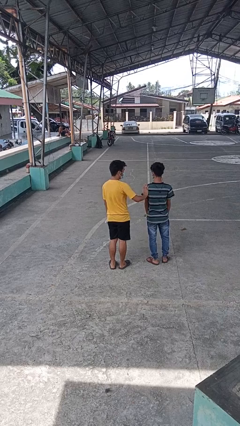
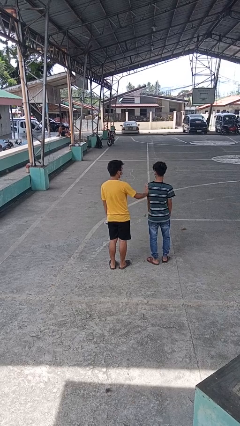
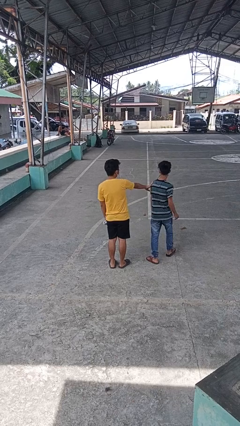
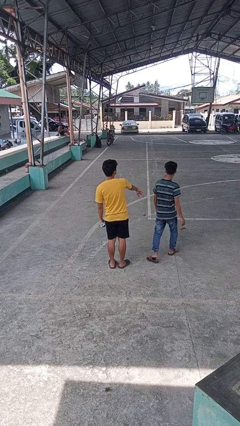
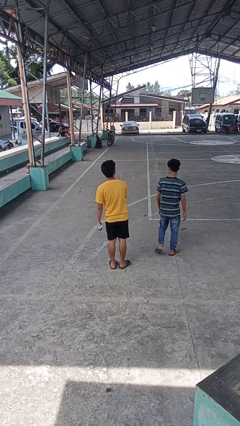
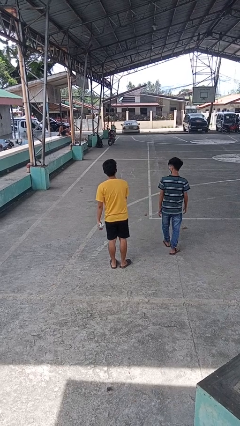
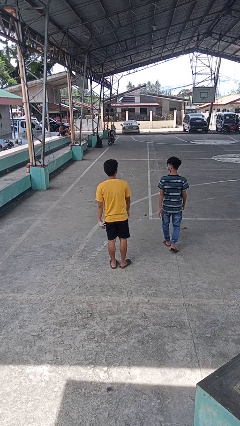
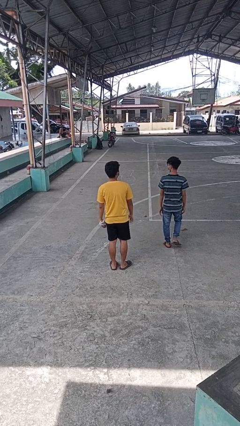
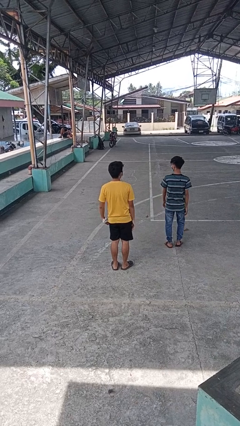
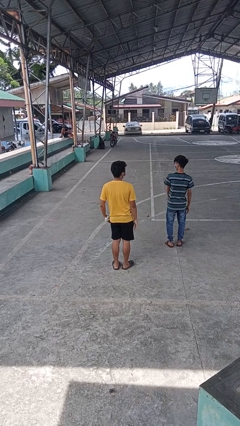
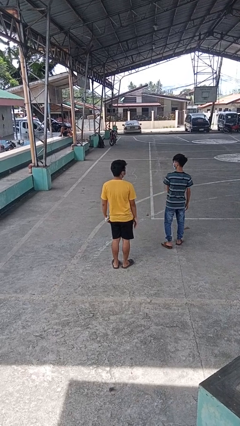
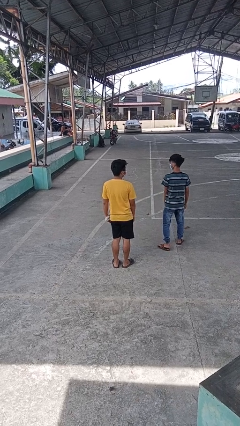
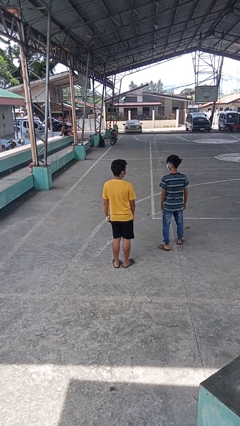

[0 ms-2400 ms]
person shoves person

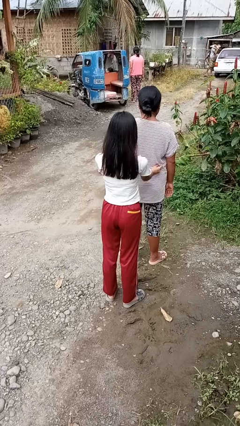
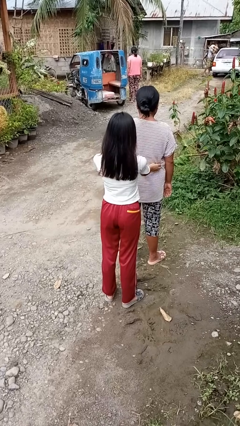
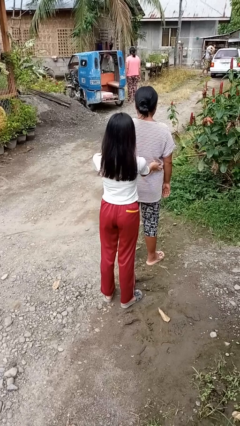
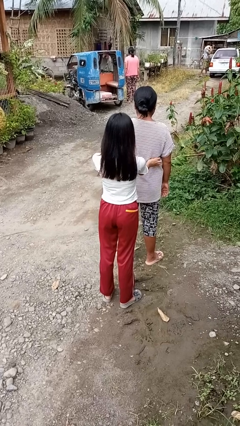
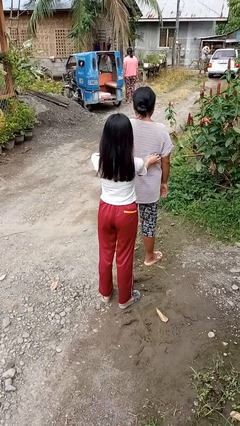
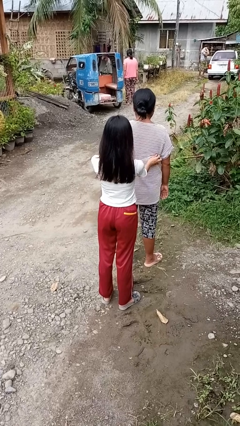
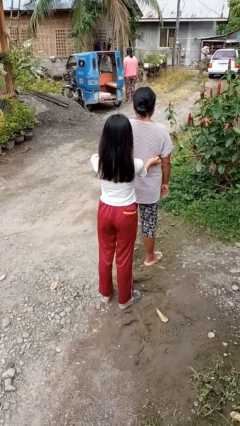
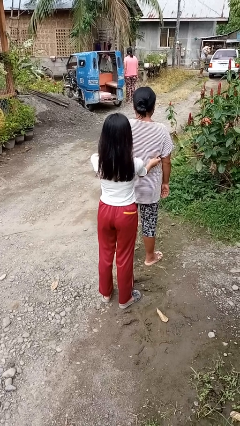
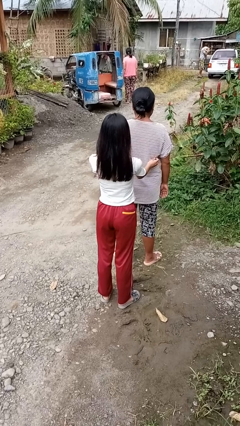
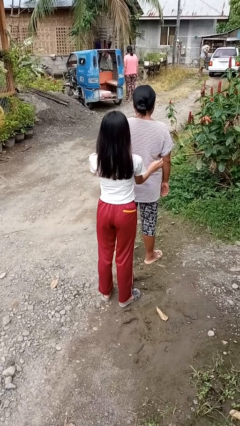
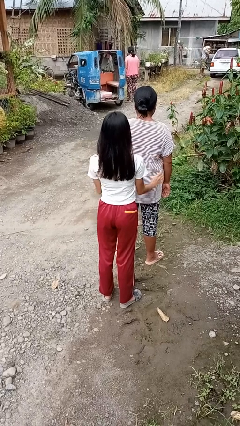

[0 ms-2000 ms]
person tickles person

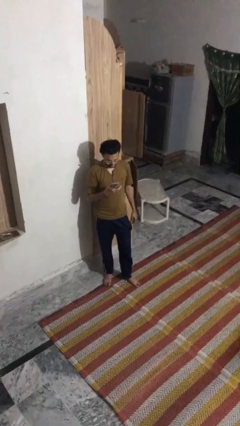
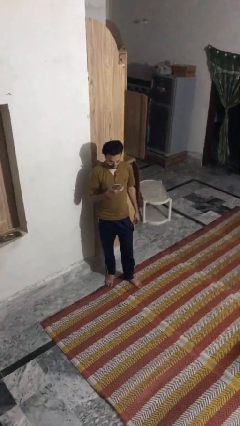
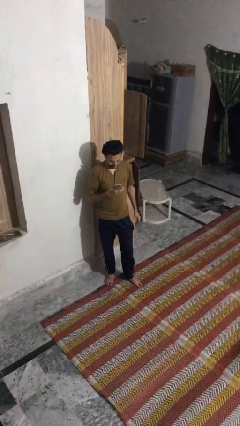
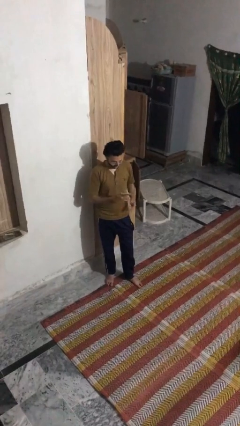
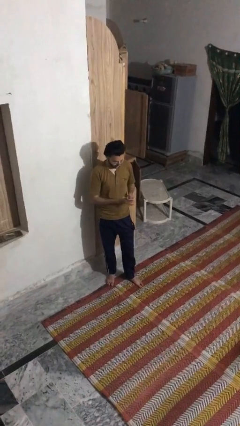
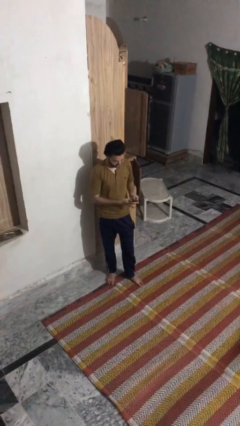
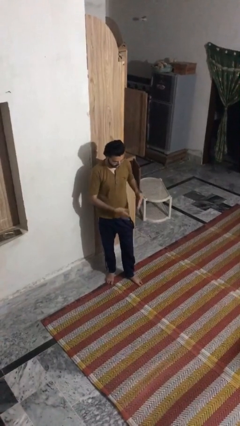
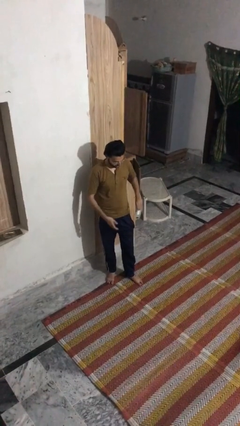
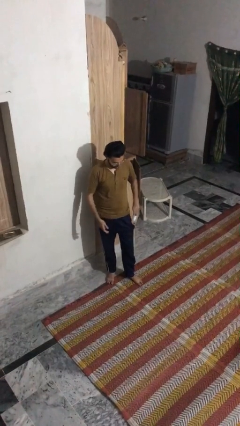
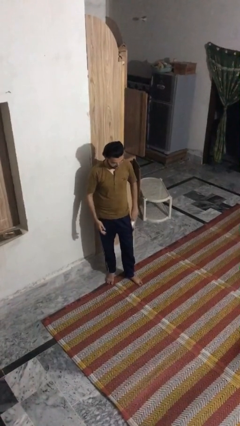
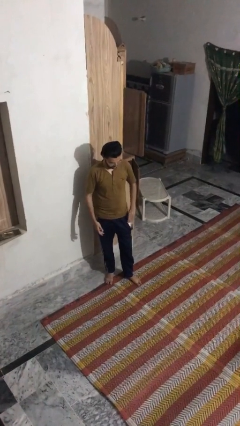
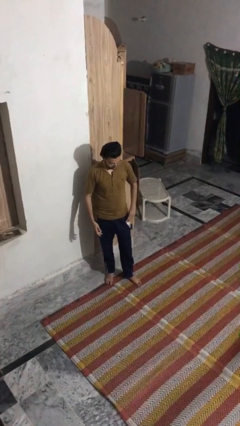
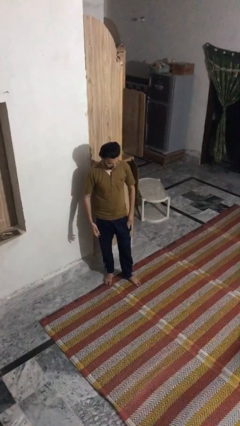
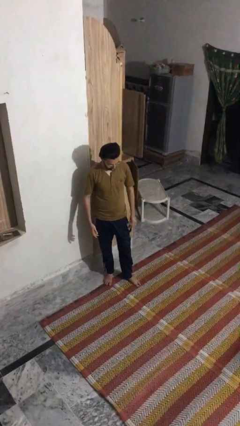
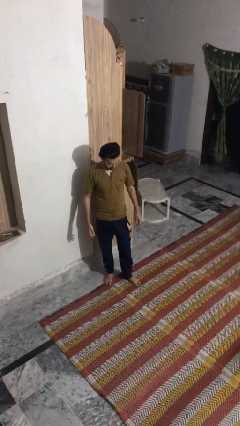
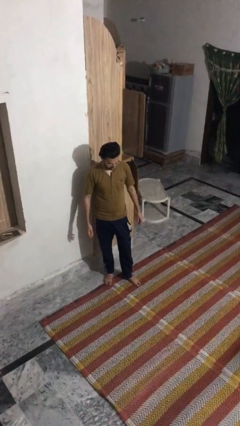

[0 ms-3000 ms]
person puts phone into pocket

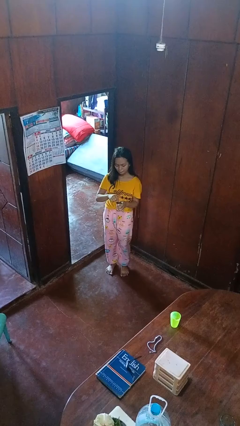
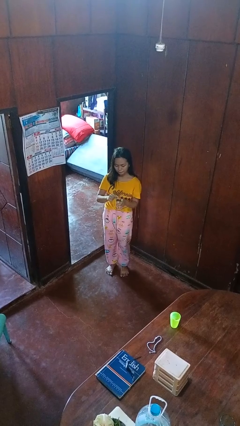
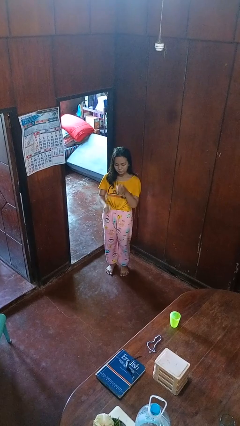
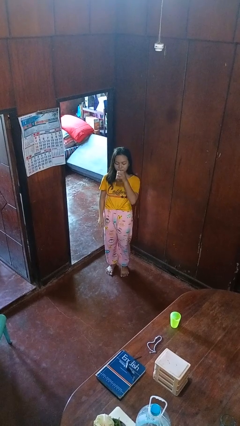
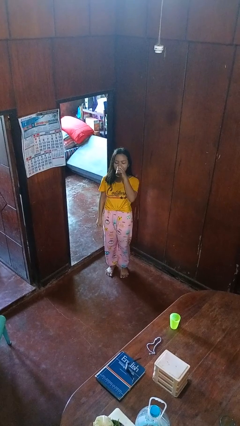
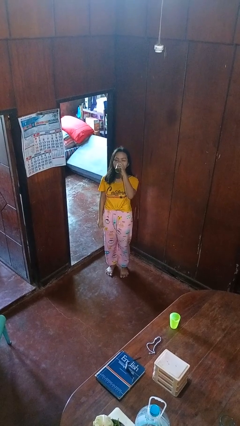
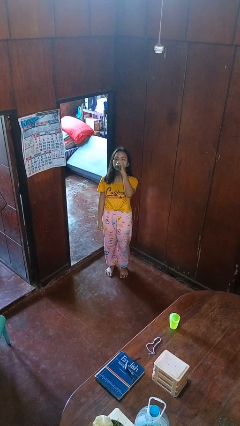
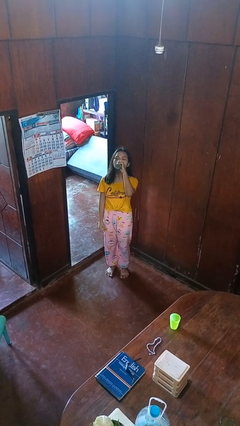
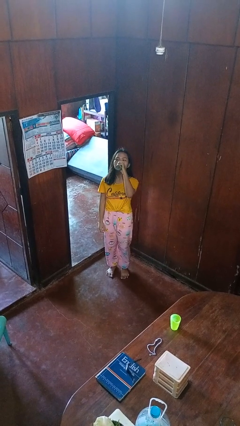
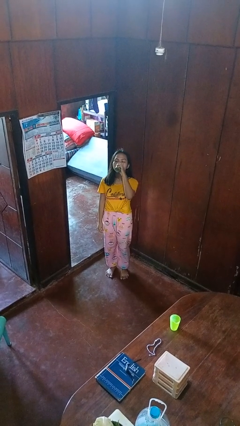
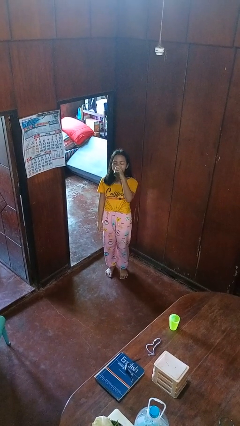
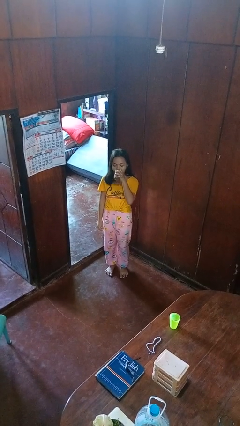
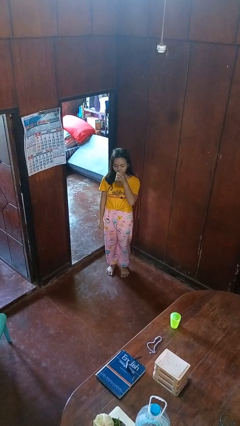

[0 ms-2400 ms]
person drinks from beverage can

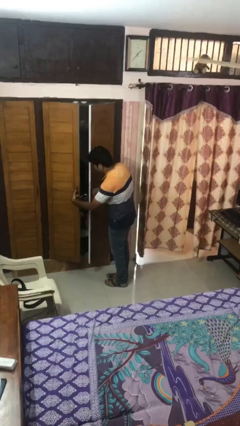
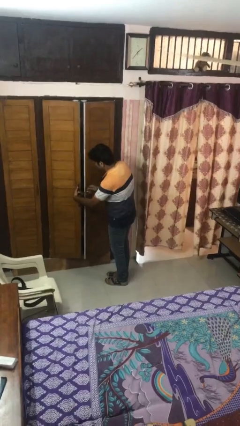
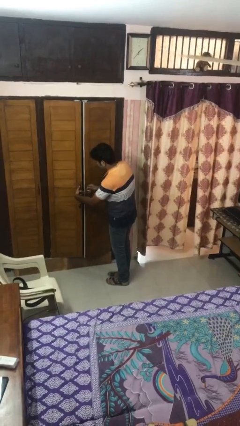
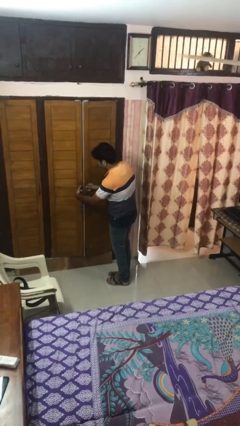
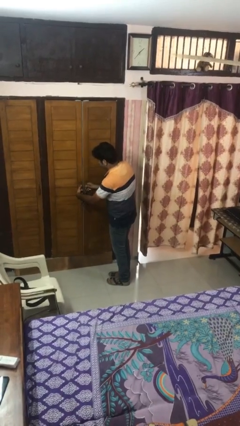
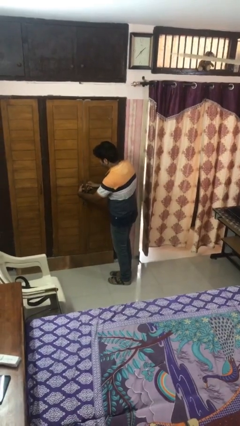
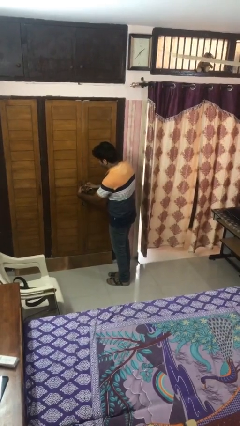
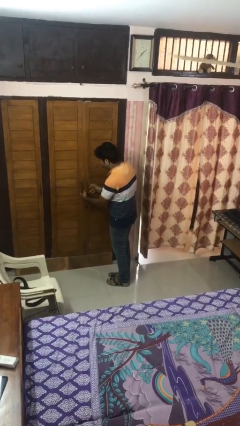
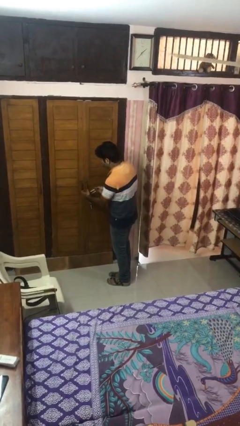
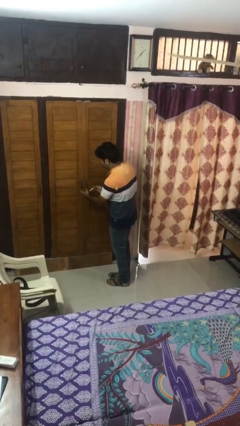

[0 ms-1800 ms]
person closes facility door

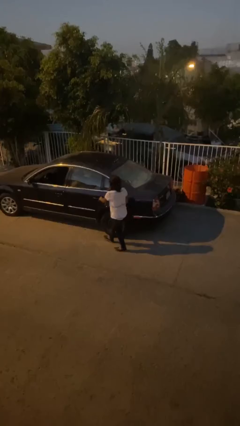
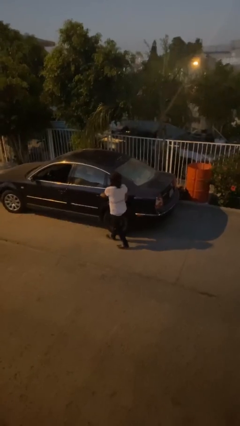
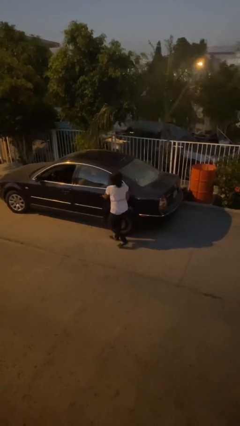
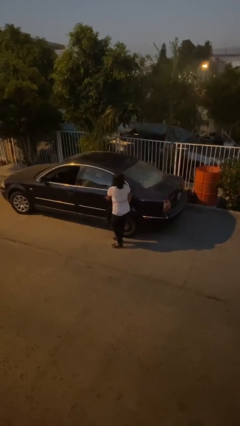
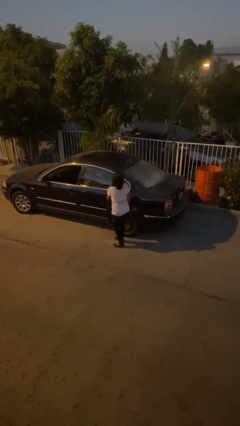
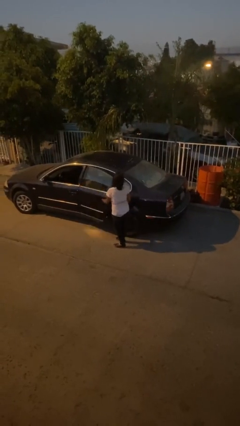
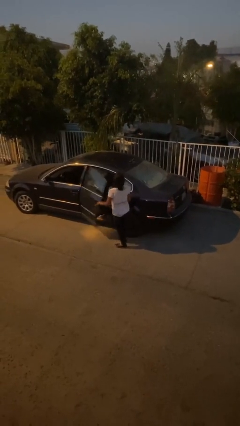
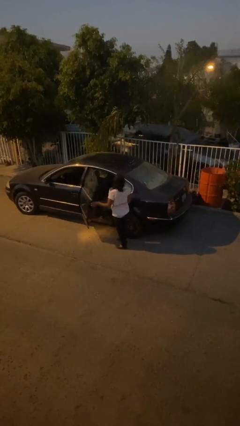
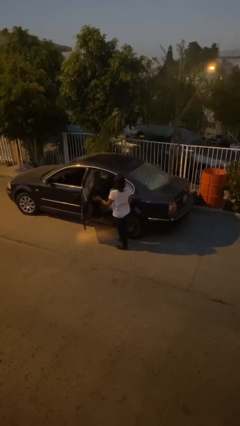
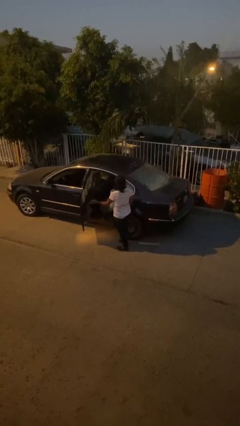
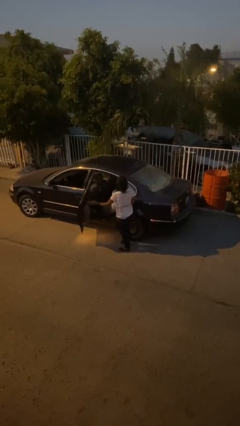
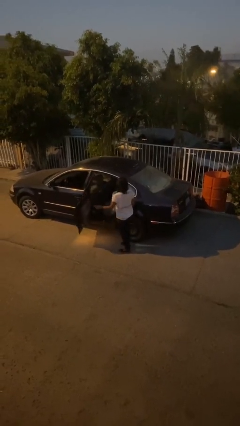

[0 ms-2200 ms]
person opens car door

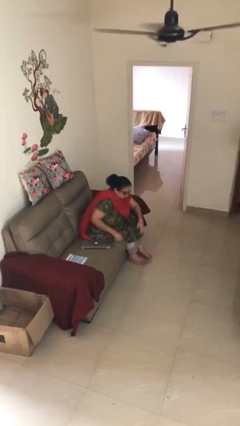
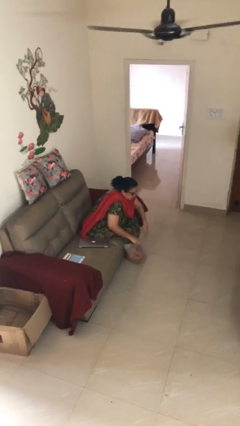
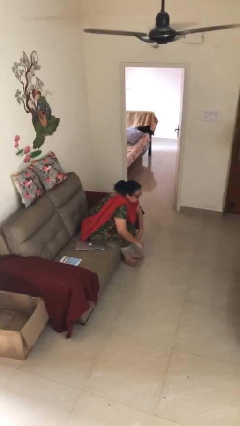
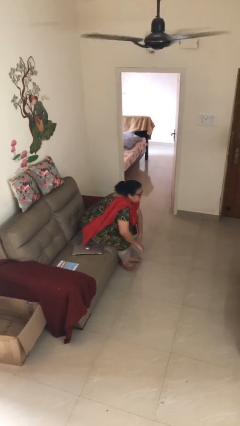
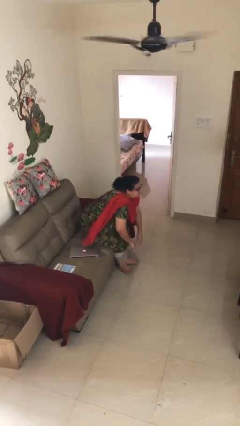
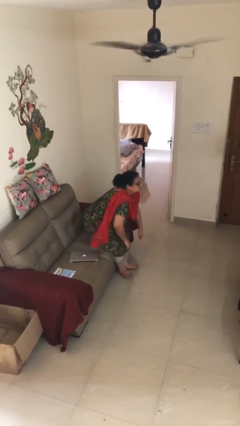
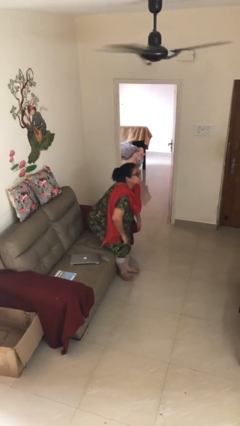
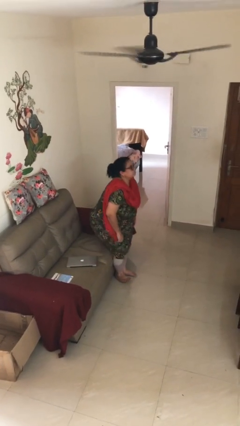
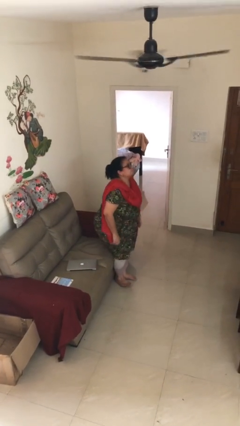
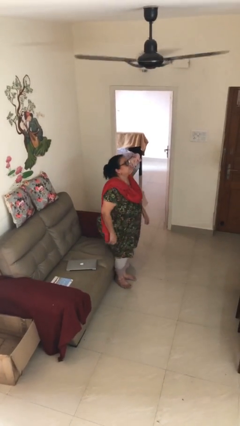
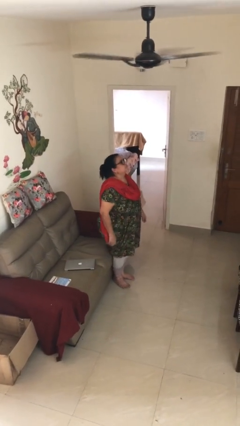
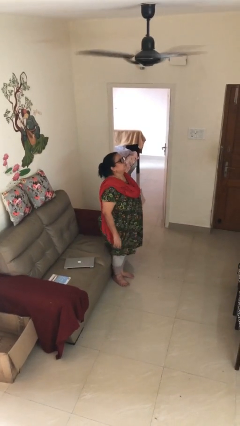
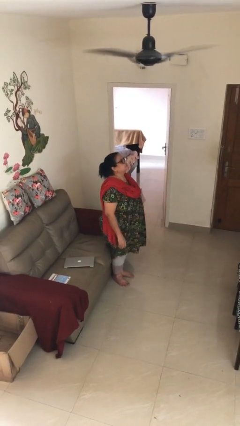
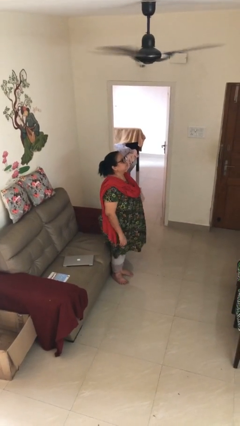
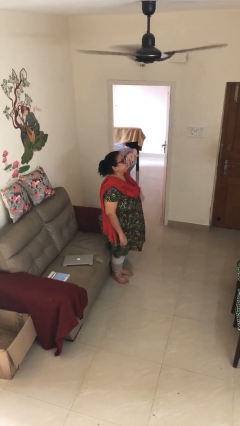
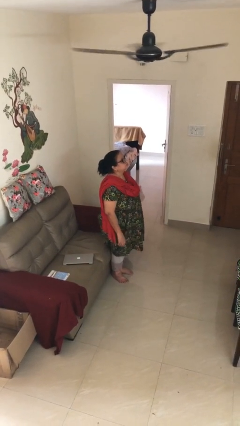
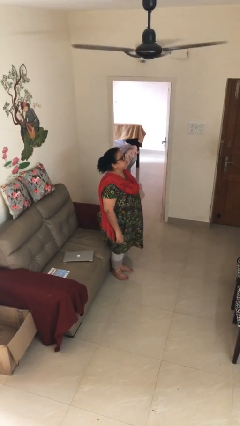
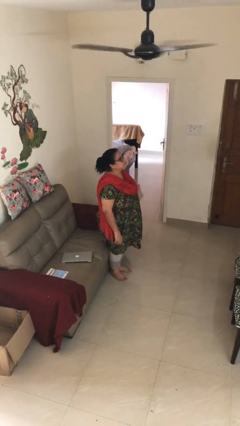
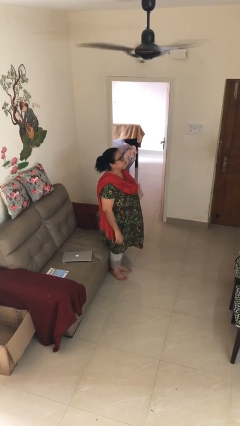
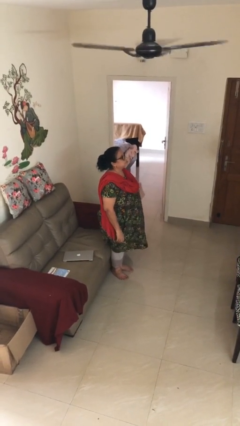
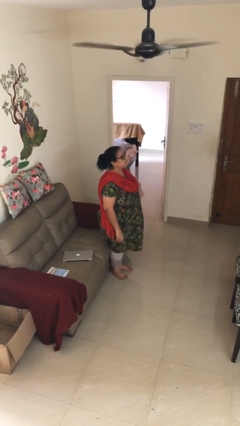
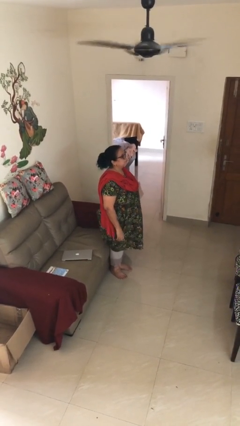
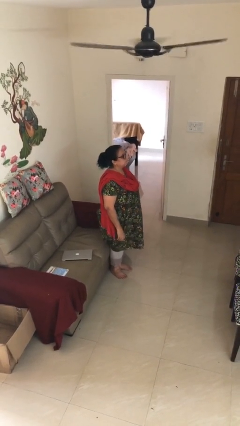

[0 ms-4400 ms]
person stands up
